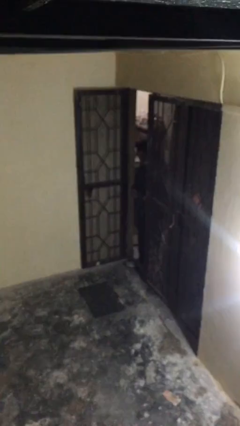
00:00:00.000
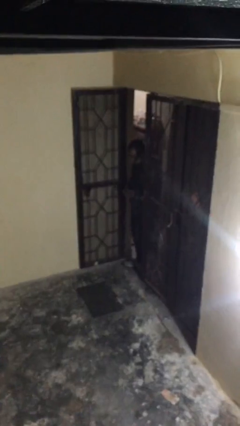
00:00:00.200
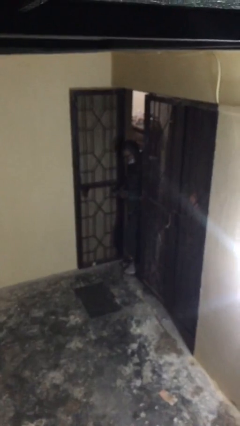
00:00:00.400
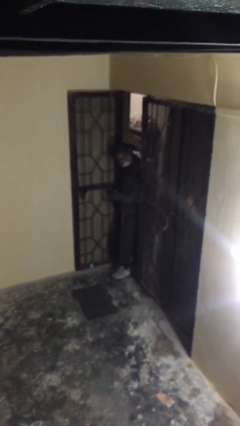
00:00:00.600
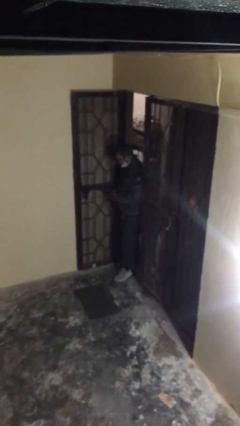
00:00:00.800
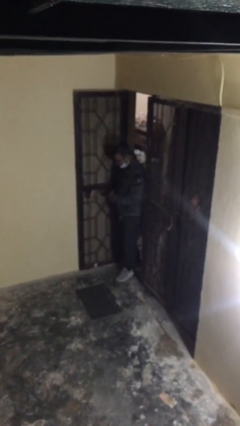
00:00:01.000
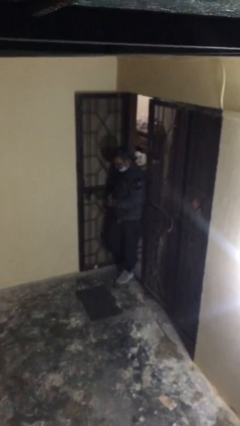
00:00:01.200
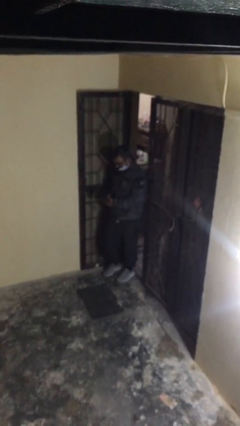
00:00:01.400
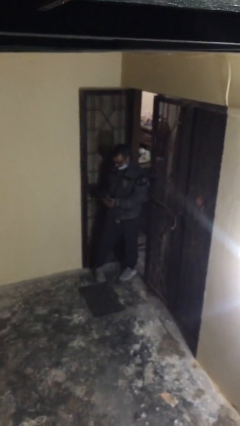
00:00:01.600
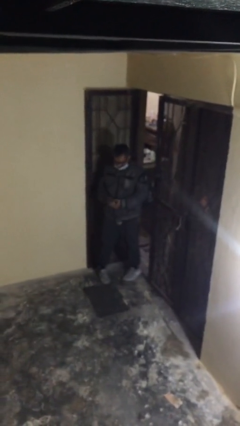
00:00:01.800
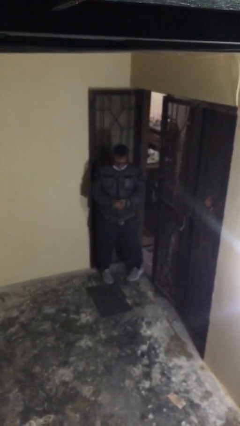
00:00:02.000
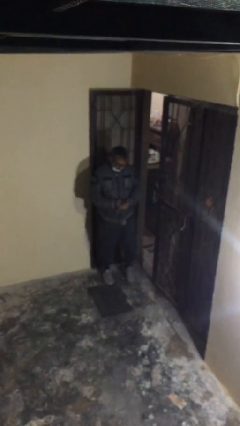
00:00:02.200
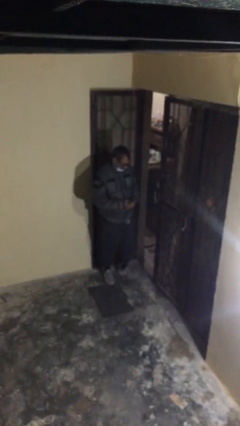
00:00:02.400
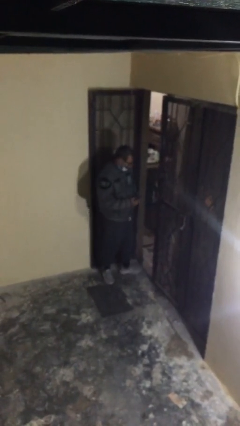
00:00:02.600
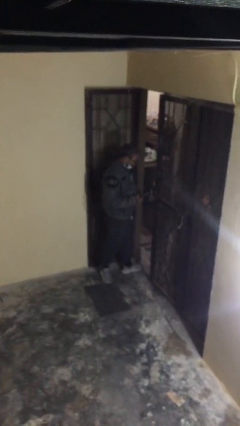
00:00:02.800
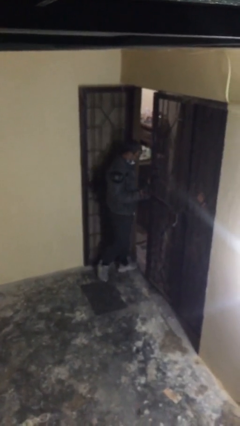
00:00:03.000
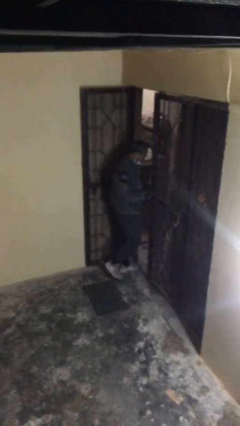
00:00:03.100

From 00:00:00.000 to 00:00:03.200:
person enters scene through structure

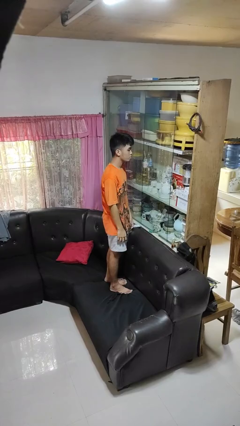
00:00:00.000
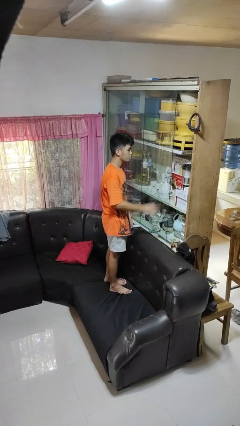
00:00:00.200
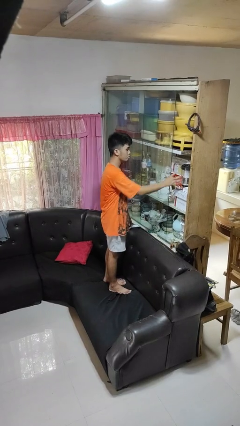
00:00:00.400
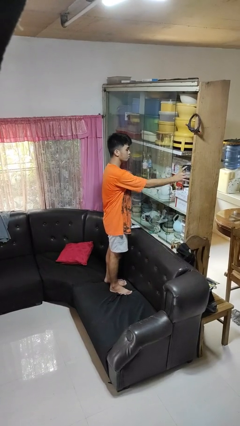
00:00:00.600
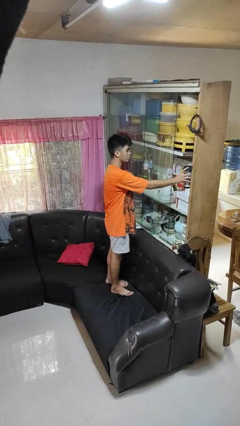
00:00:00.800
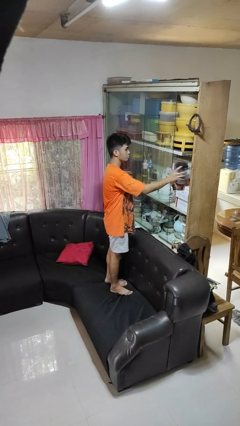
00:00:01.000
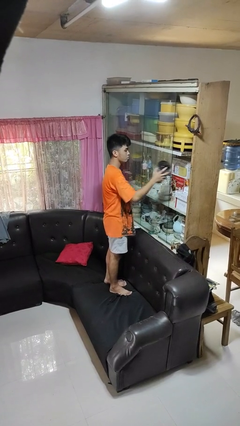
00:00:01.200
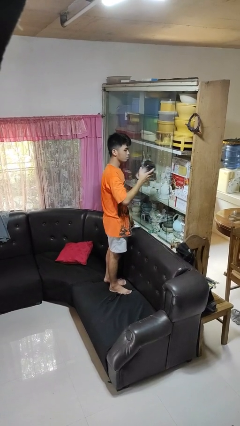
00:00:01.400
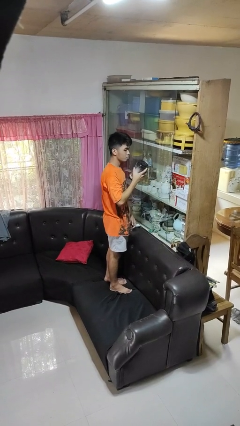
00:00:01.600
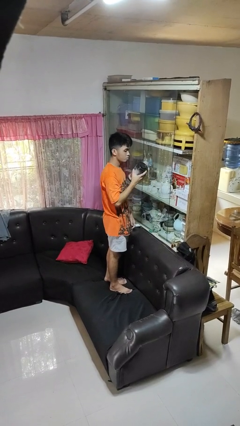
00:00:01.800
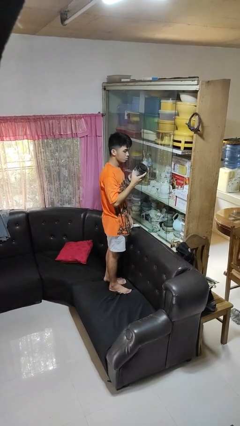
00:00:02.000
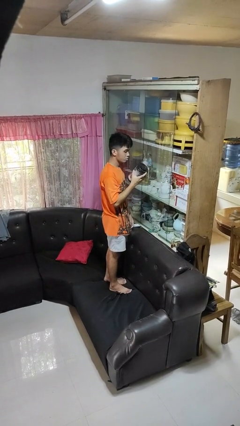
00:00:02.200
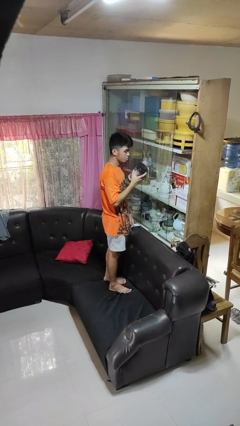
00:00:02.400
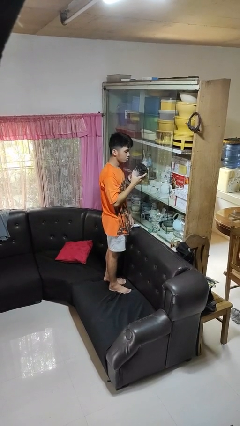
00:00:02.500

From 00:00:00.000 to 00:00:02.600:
person picks up object from cabinet

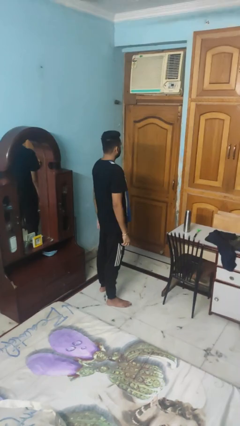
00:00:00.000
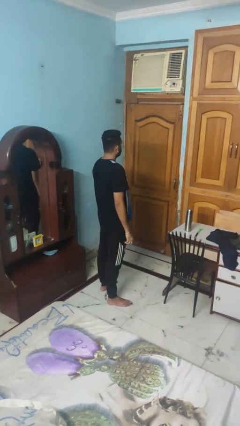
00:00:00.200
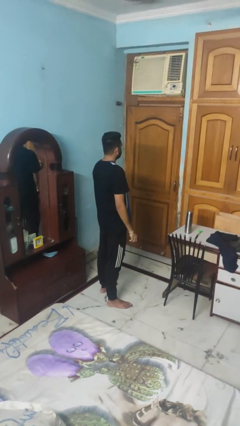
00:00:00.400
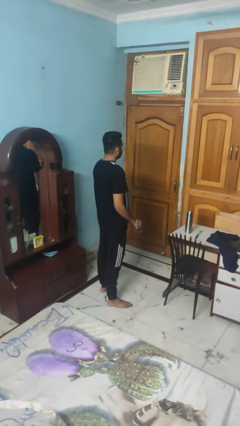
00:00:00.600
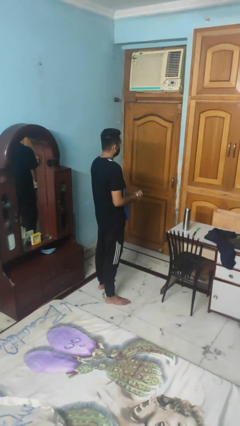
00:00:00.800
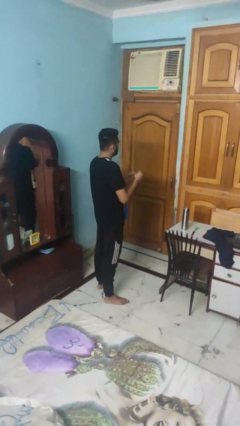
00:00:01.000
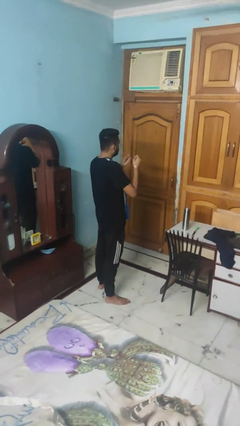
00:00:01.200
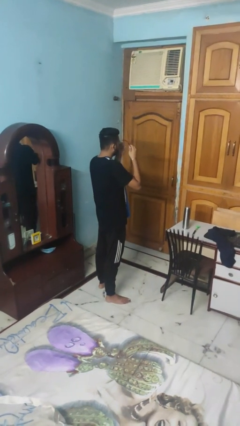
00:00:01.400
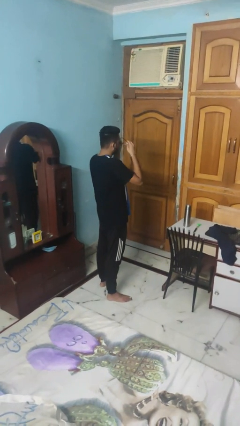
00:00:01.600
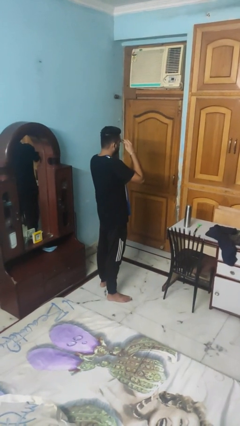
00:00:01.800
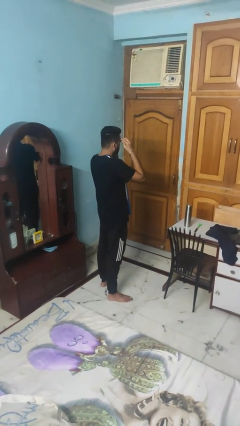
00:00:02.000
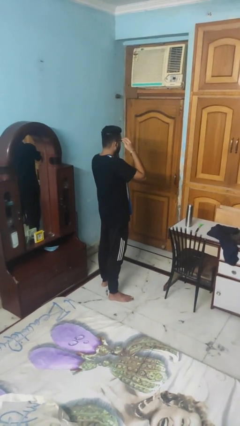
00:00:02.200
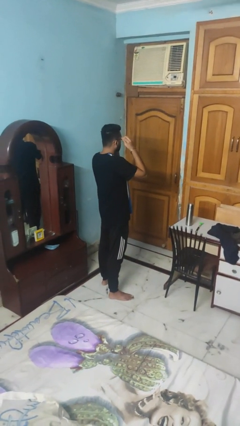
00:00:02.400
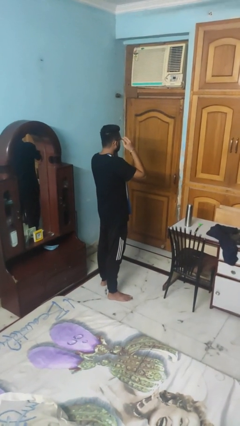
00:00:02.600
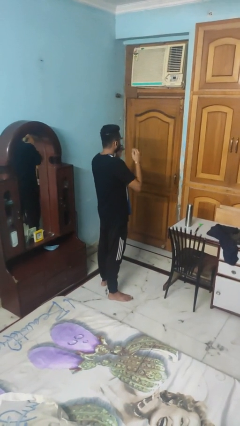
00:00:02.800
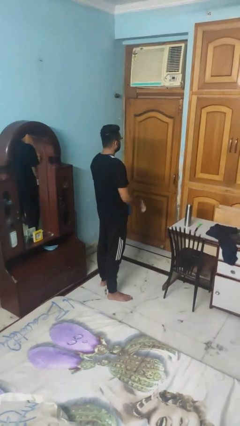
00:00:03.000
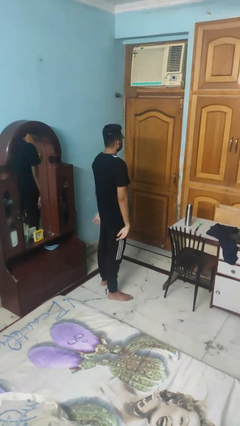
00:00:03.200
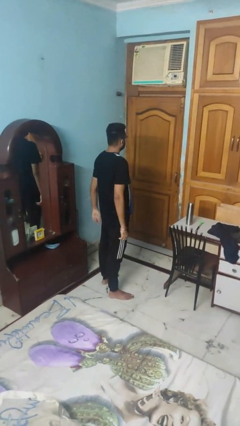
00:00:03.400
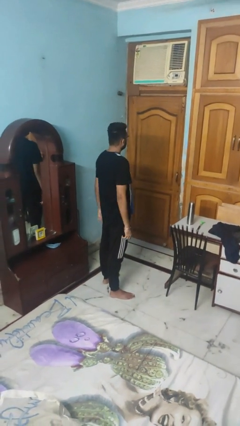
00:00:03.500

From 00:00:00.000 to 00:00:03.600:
person puts on glasses

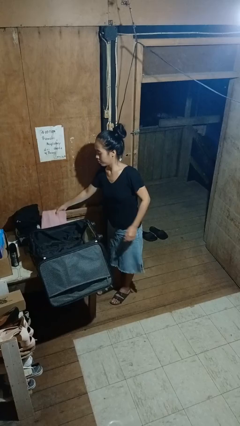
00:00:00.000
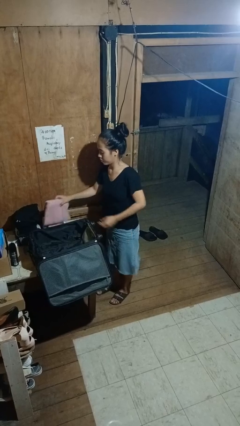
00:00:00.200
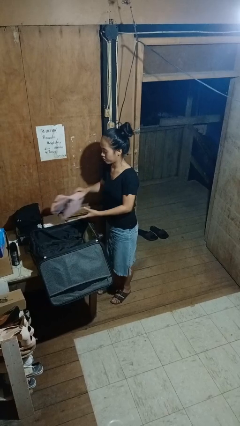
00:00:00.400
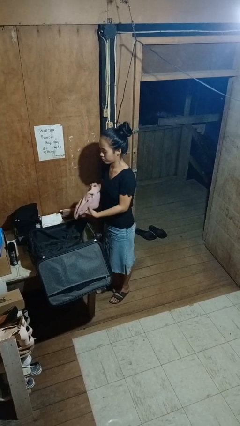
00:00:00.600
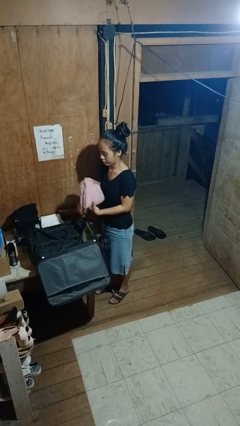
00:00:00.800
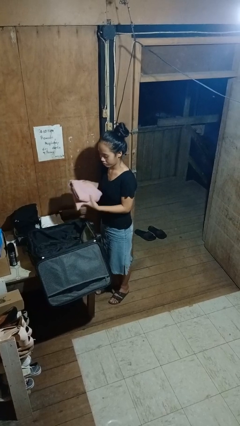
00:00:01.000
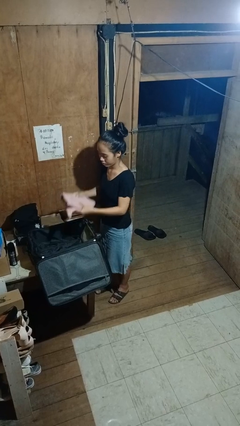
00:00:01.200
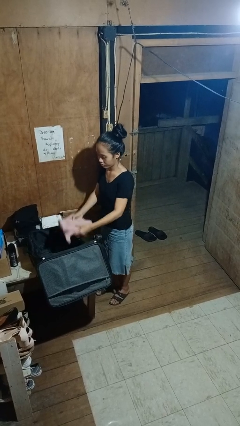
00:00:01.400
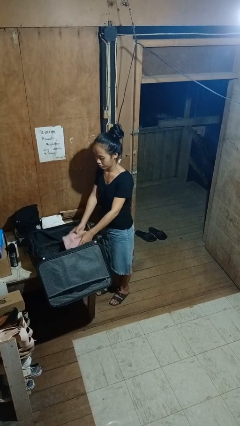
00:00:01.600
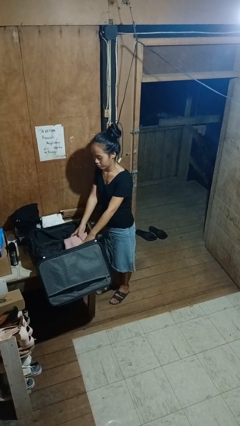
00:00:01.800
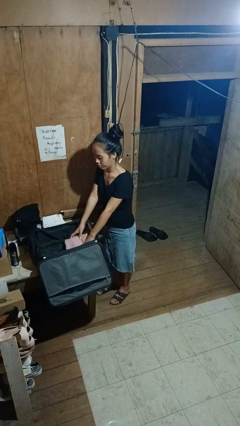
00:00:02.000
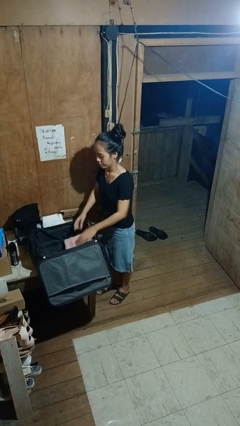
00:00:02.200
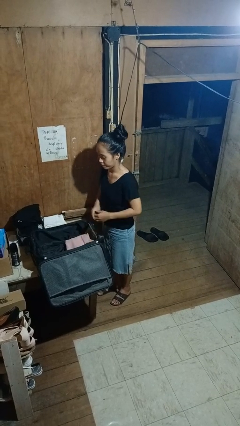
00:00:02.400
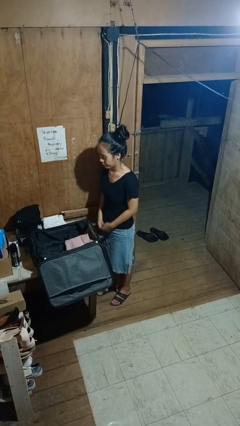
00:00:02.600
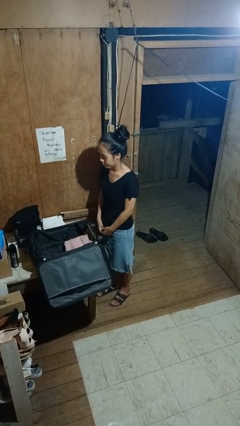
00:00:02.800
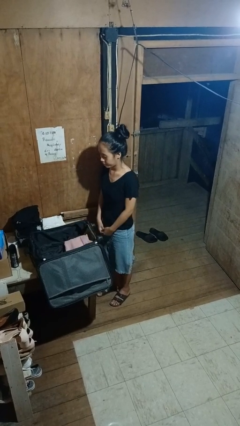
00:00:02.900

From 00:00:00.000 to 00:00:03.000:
person loads clothes into suitcase

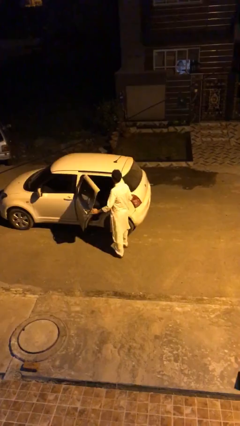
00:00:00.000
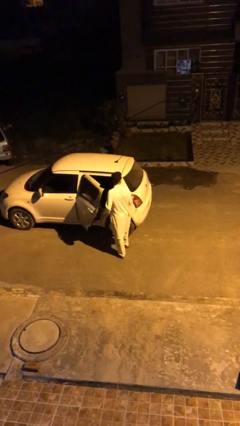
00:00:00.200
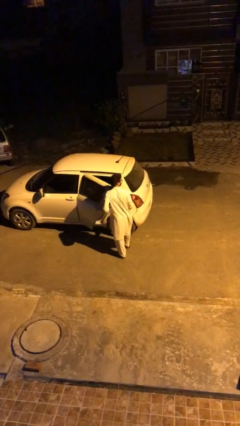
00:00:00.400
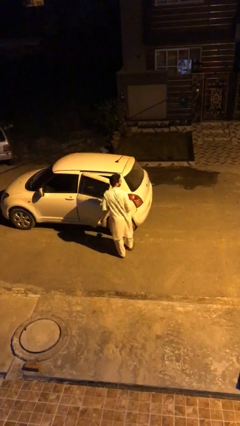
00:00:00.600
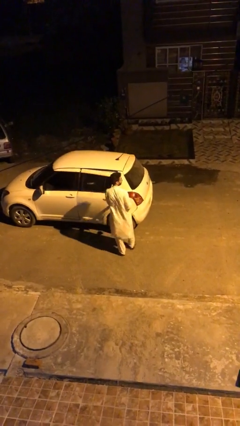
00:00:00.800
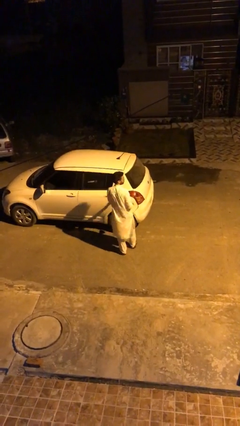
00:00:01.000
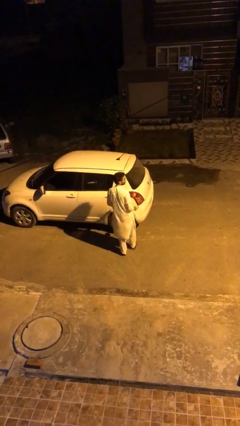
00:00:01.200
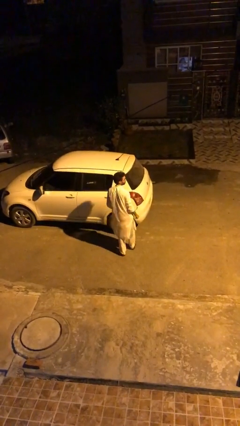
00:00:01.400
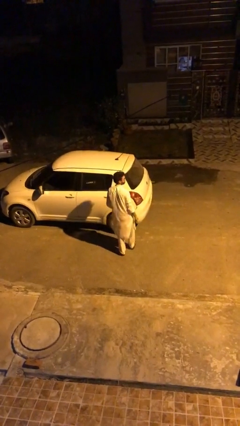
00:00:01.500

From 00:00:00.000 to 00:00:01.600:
person closes car door

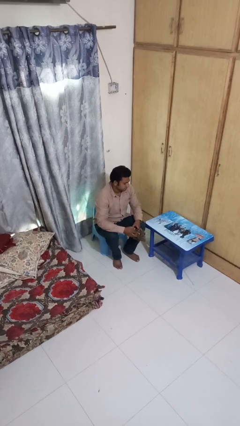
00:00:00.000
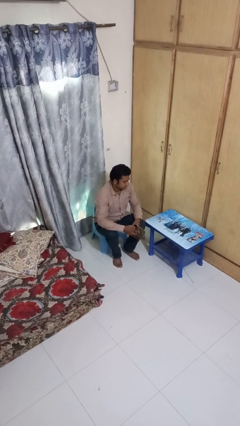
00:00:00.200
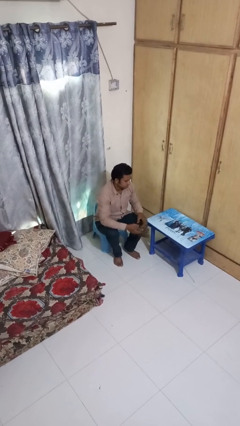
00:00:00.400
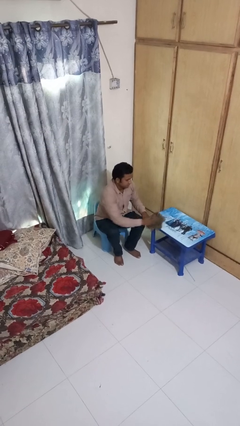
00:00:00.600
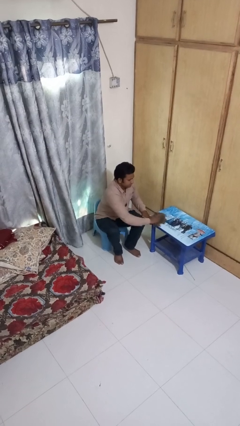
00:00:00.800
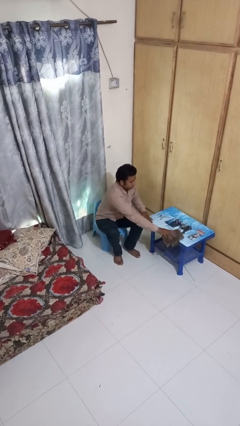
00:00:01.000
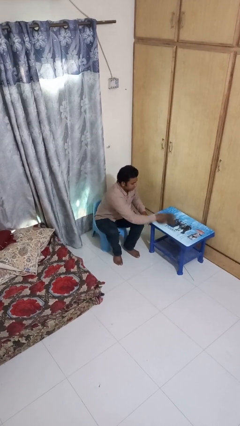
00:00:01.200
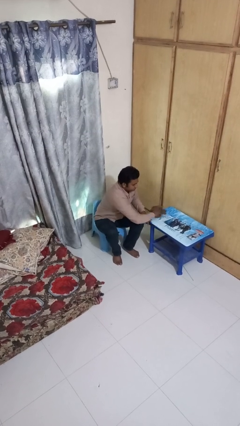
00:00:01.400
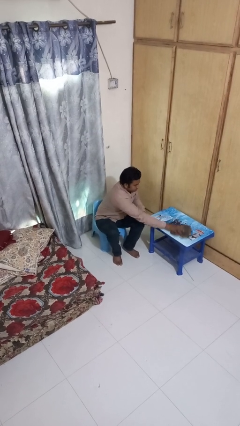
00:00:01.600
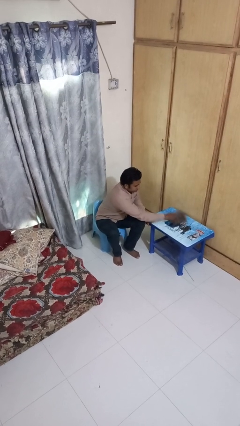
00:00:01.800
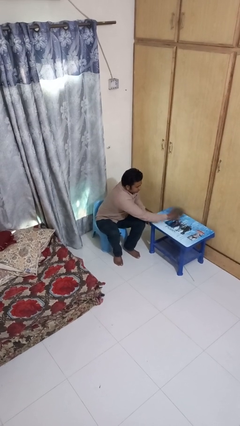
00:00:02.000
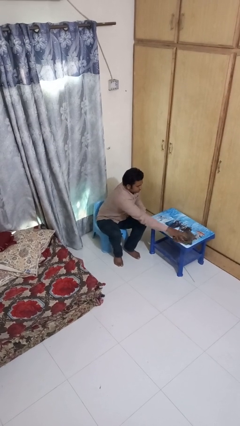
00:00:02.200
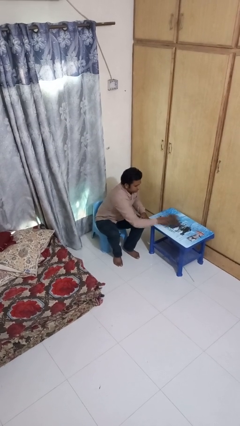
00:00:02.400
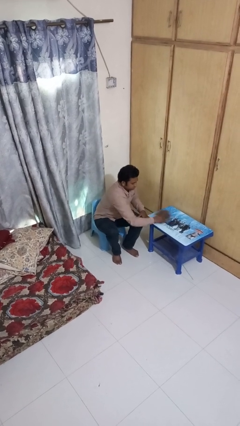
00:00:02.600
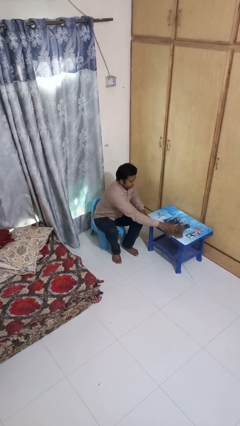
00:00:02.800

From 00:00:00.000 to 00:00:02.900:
person cleans table with rag

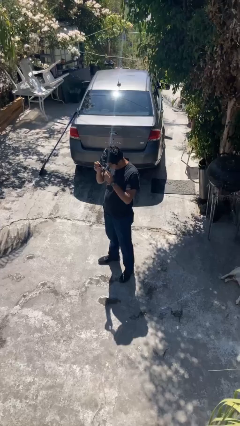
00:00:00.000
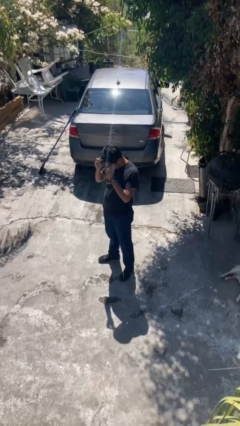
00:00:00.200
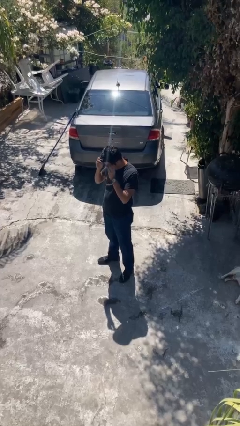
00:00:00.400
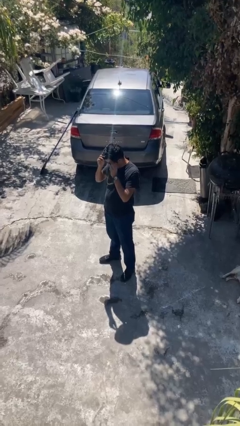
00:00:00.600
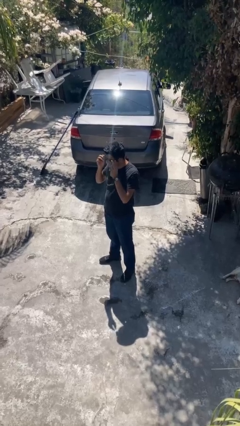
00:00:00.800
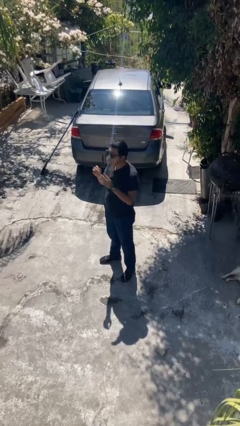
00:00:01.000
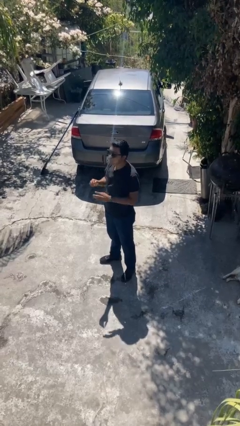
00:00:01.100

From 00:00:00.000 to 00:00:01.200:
person puts on sunglasses
